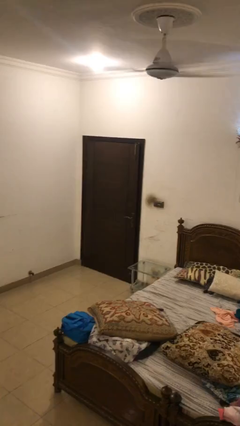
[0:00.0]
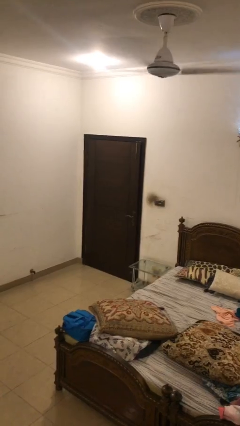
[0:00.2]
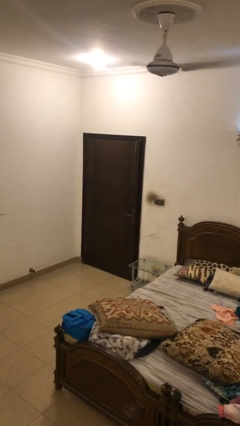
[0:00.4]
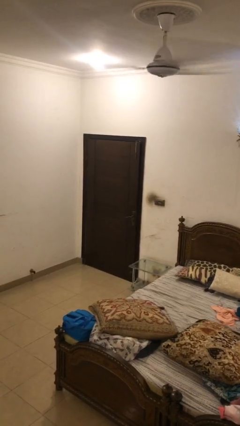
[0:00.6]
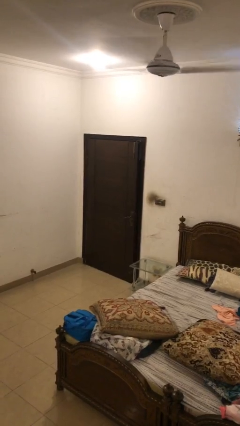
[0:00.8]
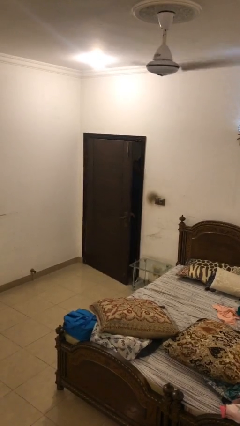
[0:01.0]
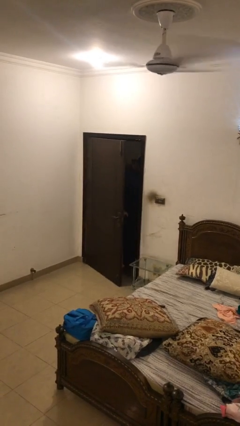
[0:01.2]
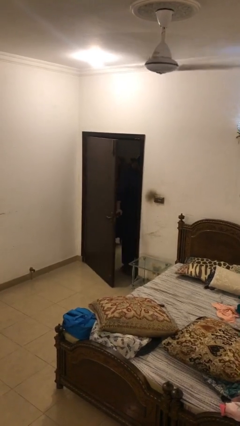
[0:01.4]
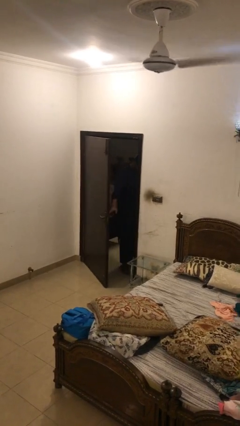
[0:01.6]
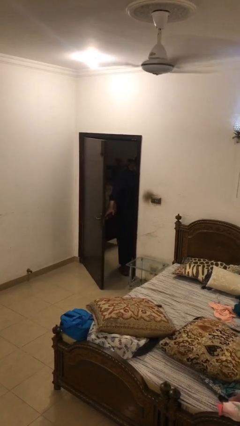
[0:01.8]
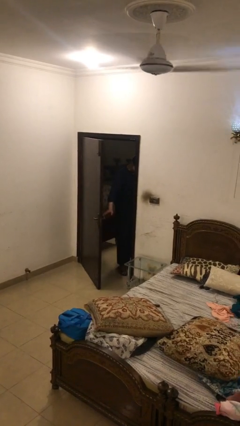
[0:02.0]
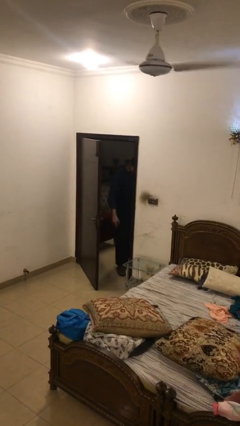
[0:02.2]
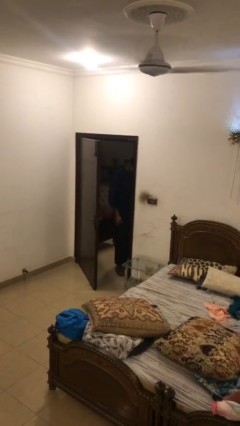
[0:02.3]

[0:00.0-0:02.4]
person opens facility door

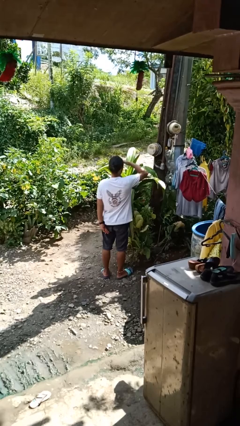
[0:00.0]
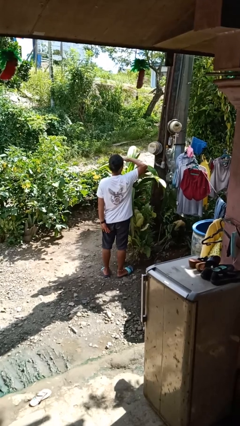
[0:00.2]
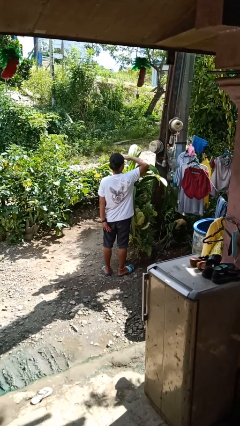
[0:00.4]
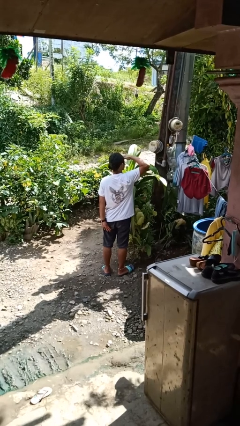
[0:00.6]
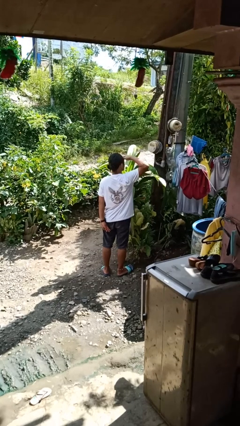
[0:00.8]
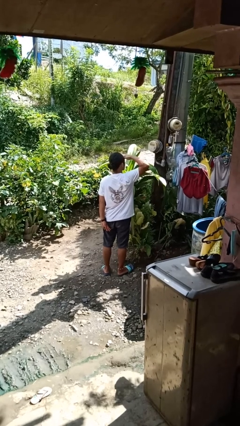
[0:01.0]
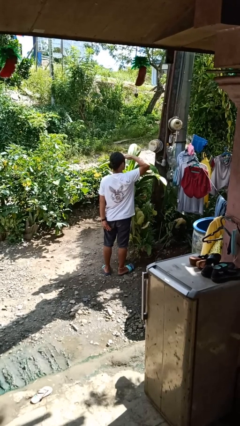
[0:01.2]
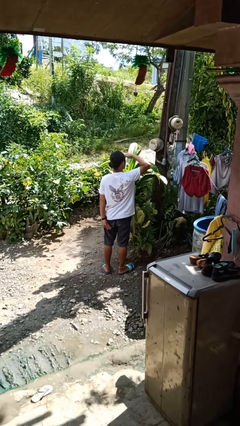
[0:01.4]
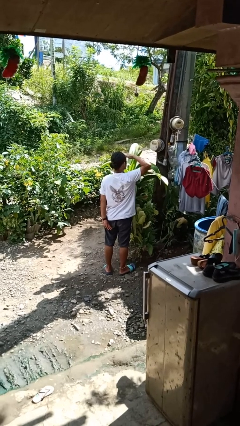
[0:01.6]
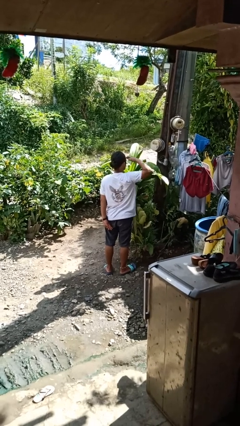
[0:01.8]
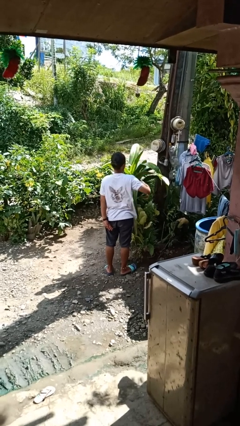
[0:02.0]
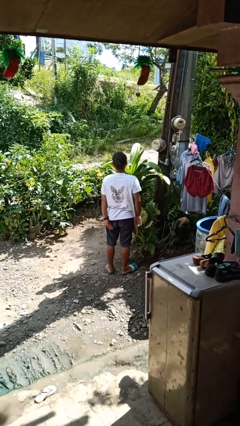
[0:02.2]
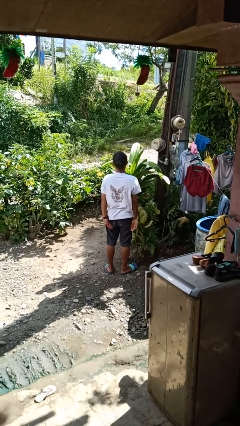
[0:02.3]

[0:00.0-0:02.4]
person shades eyes

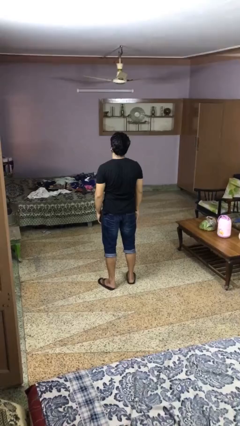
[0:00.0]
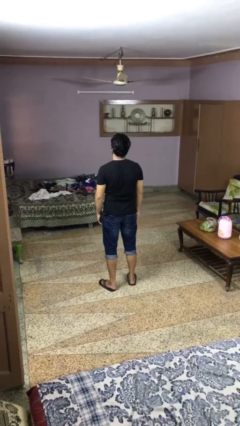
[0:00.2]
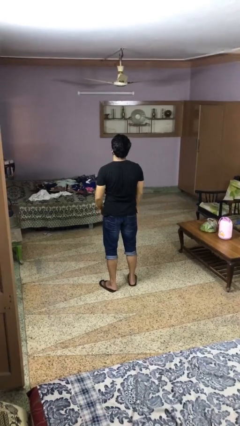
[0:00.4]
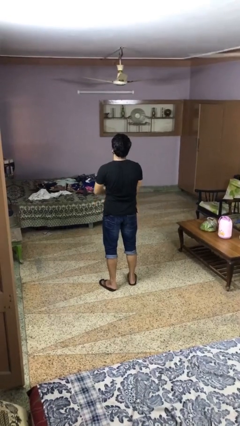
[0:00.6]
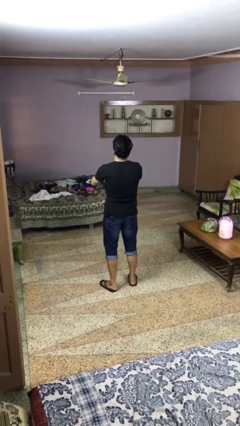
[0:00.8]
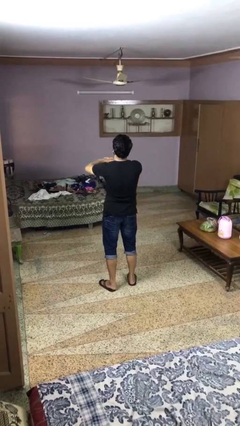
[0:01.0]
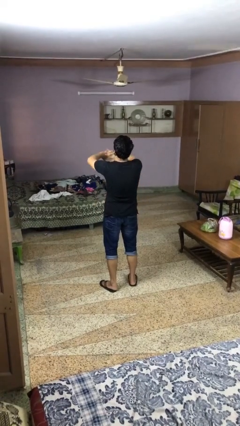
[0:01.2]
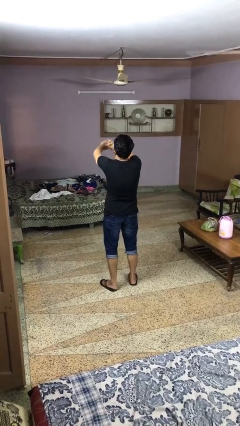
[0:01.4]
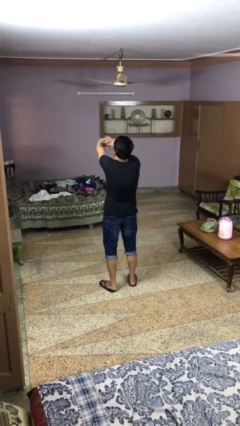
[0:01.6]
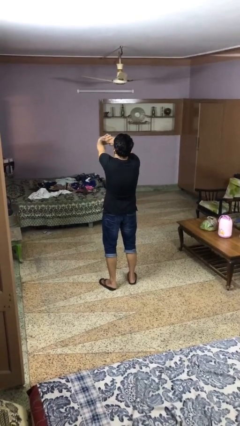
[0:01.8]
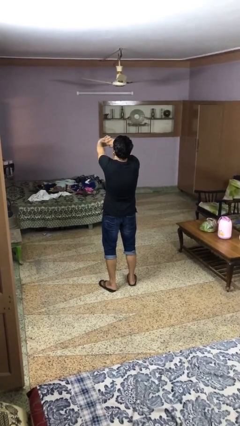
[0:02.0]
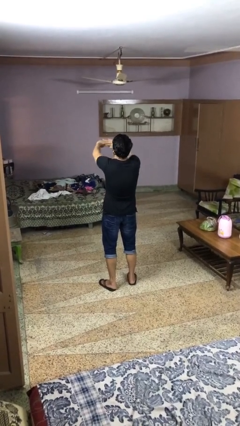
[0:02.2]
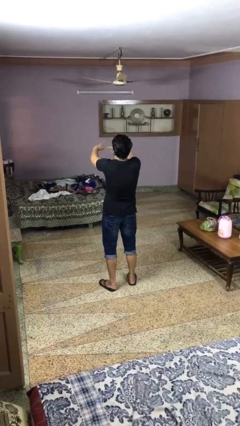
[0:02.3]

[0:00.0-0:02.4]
person cracks knuckles

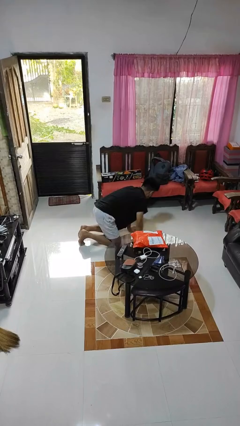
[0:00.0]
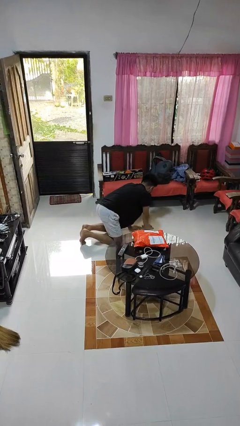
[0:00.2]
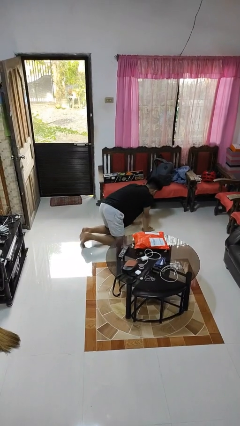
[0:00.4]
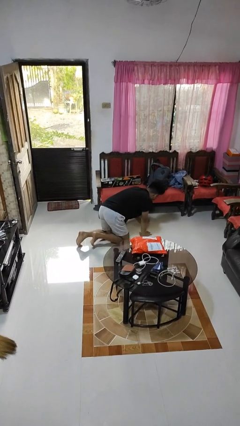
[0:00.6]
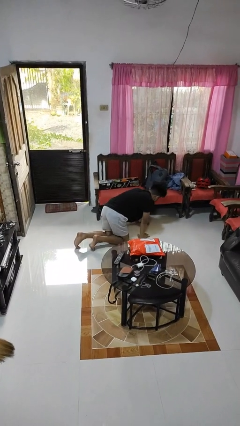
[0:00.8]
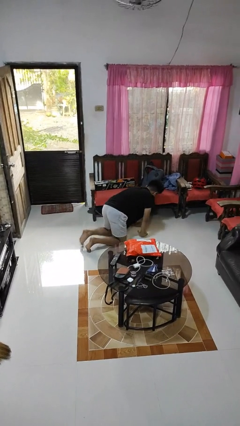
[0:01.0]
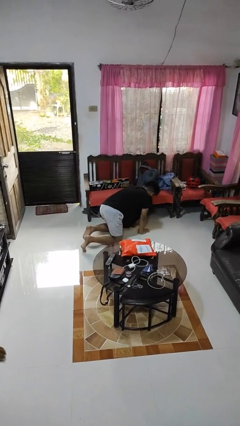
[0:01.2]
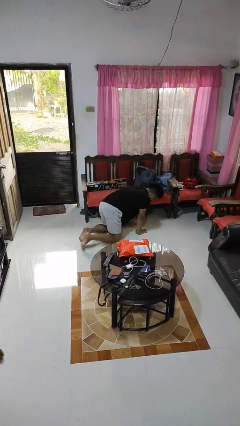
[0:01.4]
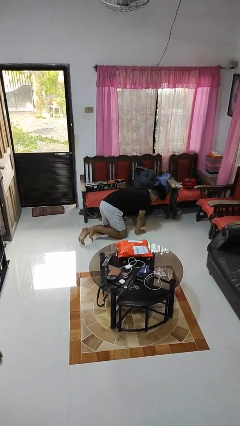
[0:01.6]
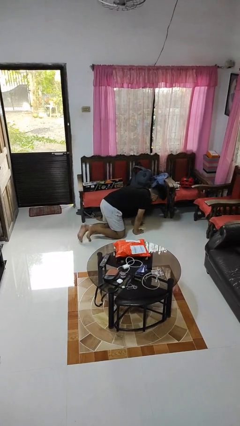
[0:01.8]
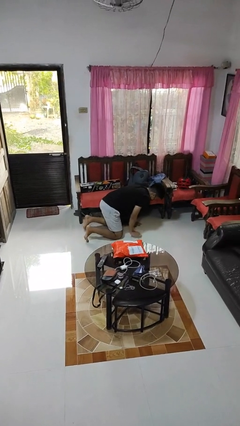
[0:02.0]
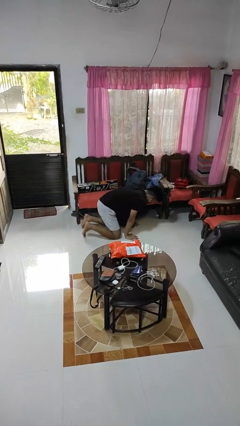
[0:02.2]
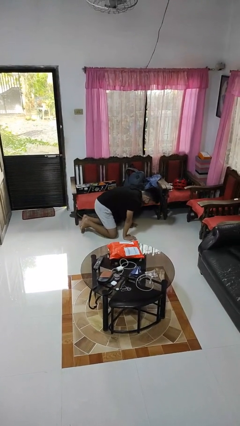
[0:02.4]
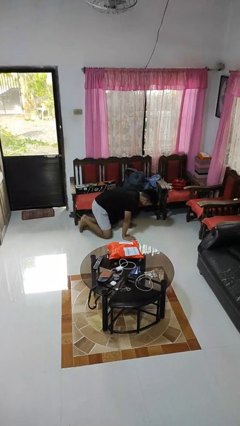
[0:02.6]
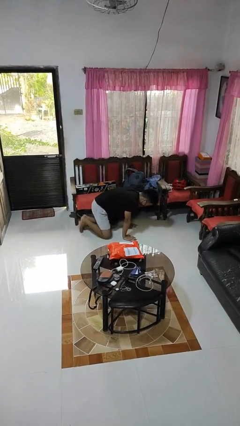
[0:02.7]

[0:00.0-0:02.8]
person crawls

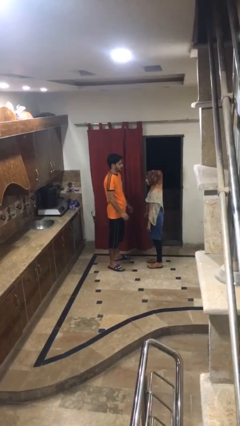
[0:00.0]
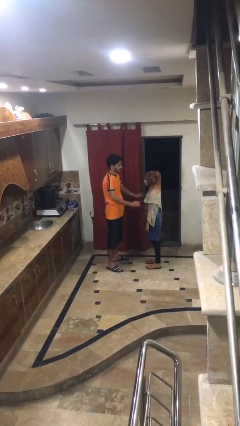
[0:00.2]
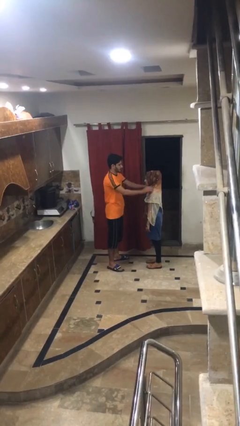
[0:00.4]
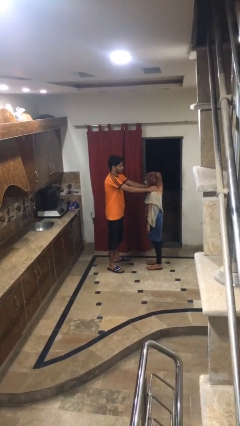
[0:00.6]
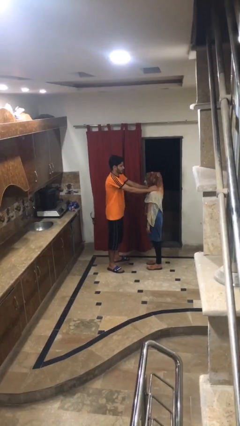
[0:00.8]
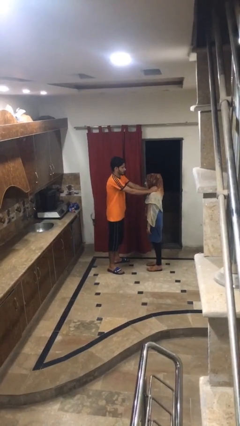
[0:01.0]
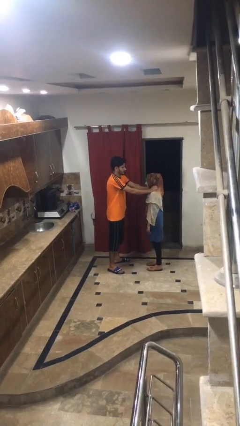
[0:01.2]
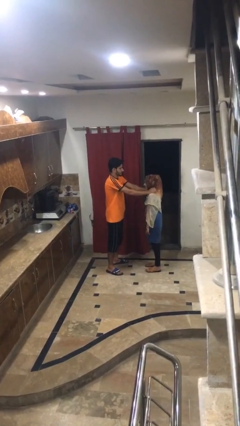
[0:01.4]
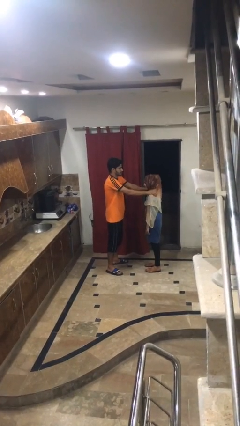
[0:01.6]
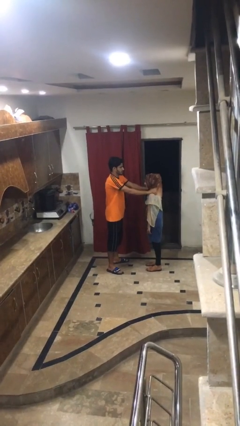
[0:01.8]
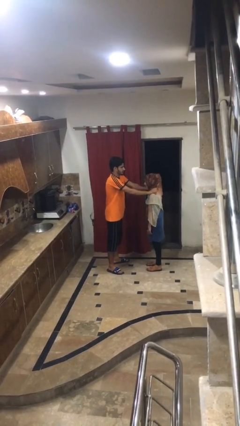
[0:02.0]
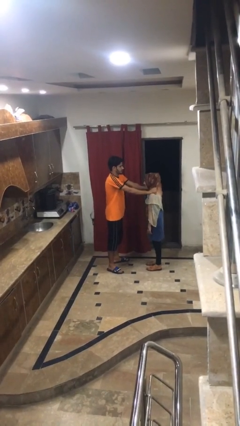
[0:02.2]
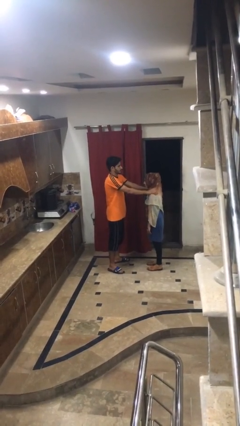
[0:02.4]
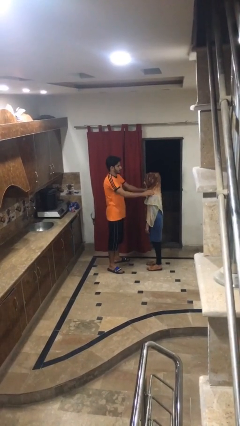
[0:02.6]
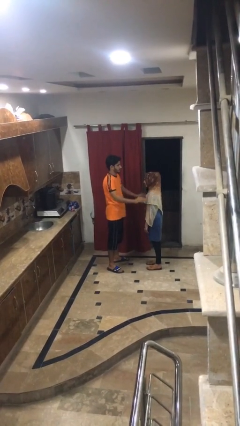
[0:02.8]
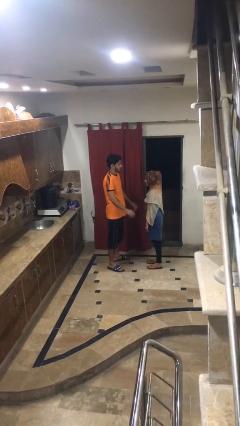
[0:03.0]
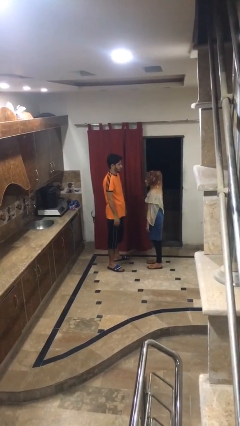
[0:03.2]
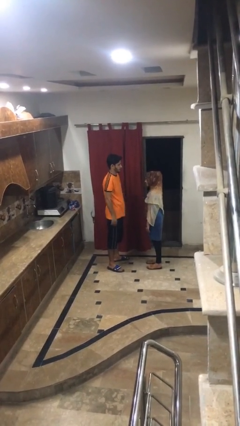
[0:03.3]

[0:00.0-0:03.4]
person pounds shoulders of person

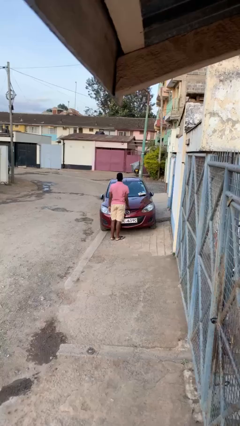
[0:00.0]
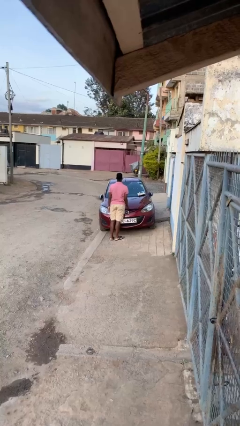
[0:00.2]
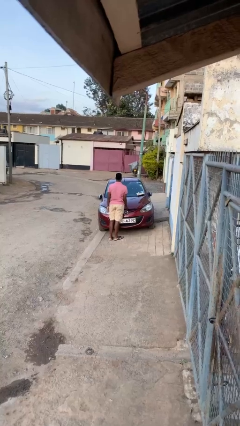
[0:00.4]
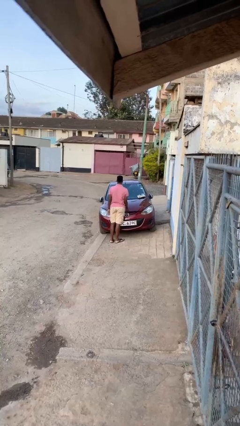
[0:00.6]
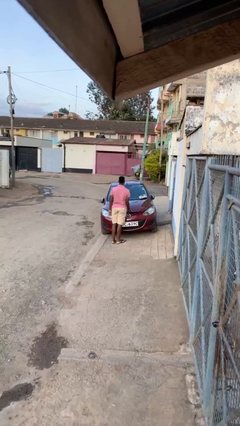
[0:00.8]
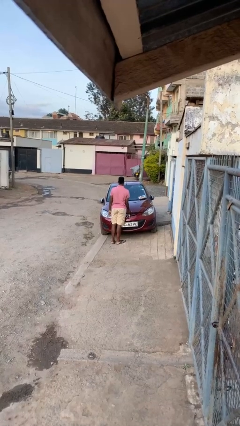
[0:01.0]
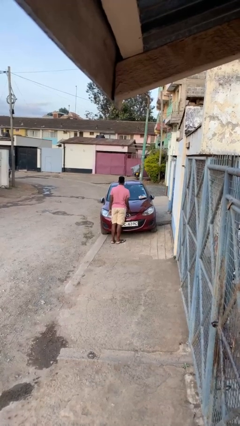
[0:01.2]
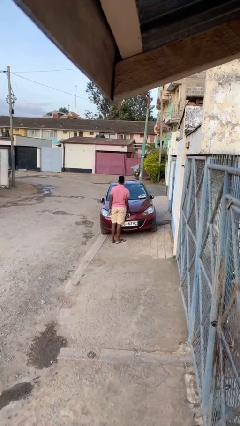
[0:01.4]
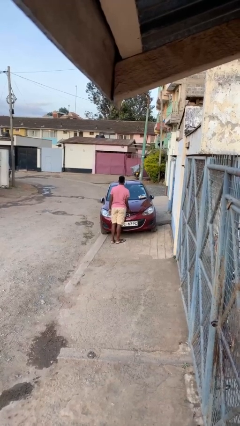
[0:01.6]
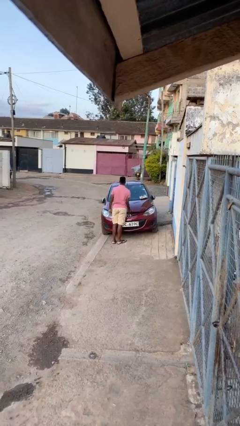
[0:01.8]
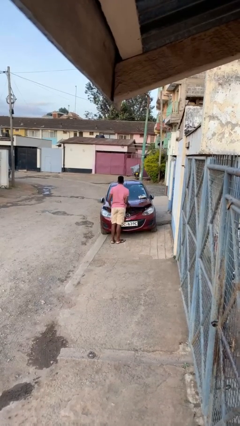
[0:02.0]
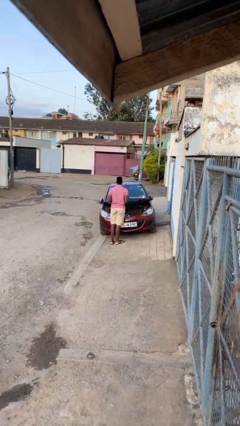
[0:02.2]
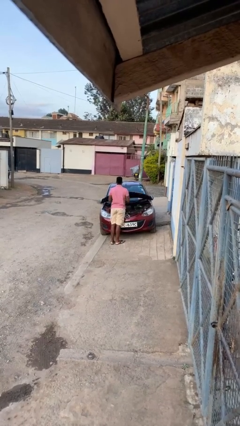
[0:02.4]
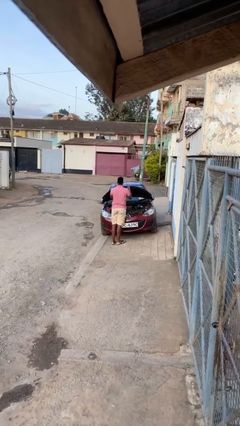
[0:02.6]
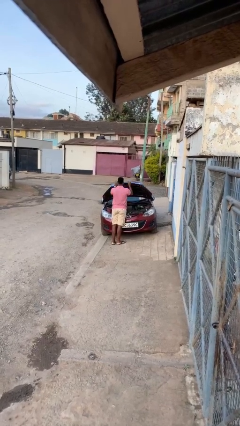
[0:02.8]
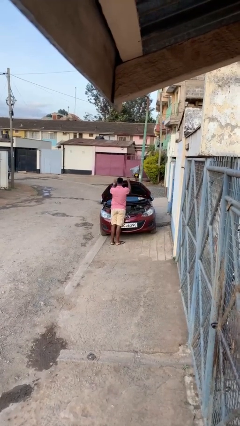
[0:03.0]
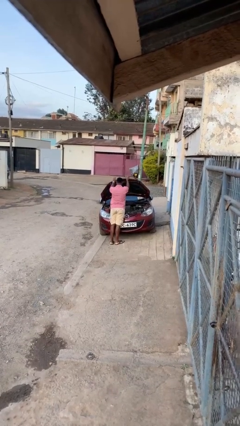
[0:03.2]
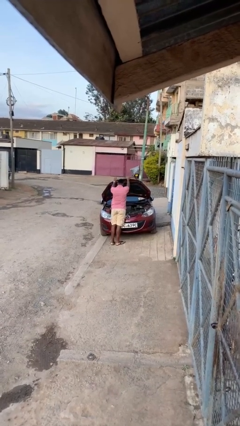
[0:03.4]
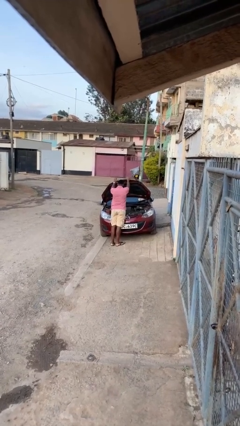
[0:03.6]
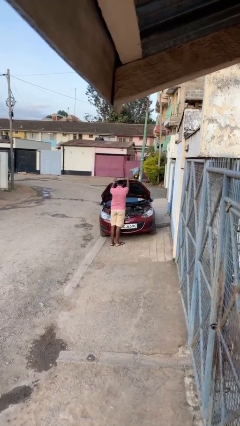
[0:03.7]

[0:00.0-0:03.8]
person opens car hood

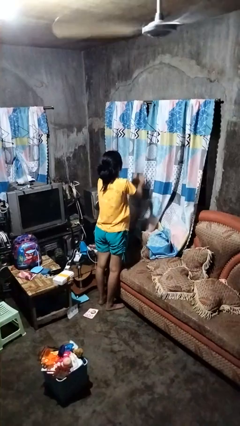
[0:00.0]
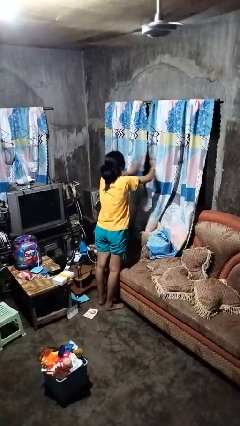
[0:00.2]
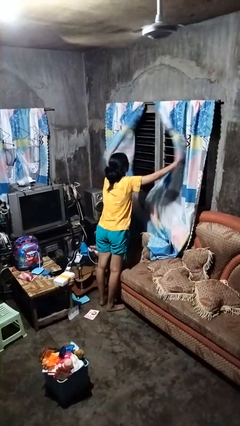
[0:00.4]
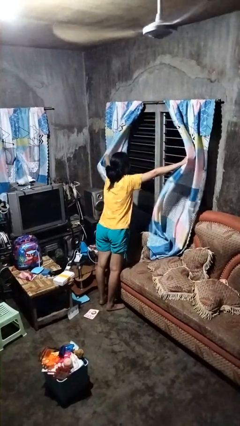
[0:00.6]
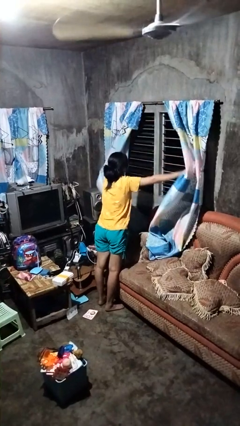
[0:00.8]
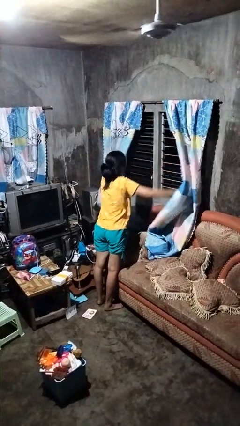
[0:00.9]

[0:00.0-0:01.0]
person opens curtains
